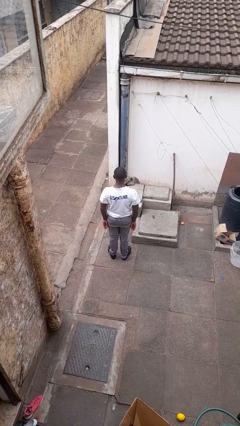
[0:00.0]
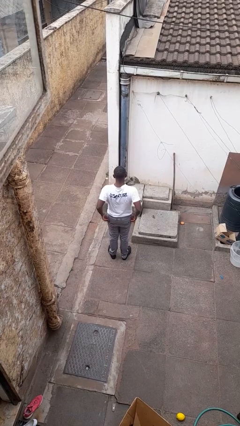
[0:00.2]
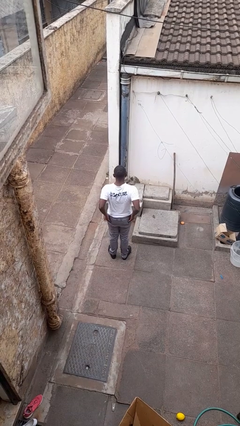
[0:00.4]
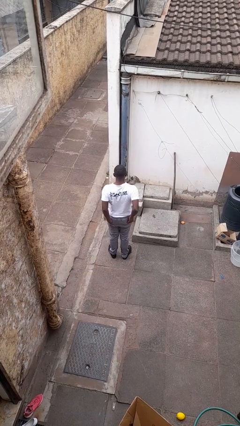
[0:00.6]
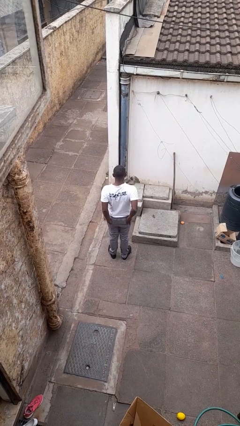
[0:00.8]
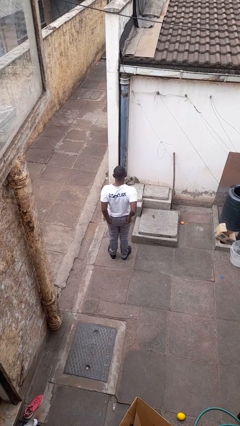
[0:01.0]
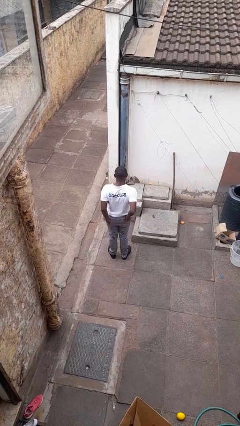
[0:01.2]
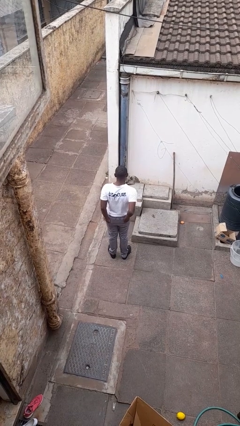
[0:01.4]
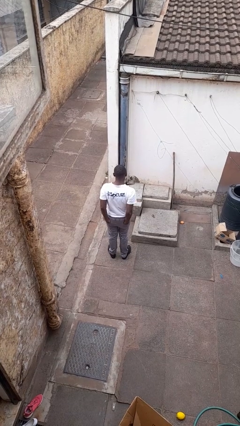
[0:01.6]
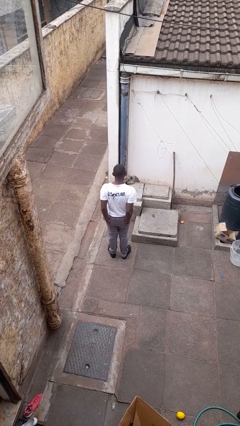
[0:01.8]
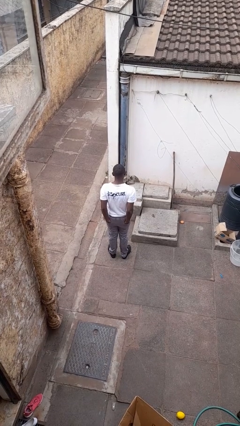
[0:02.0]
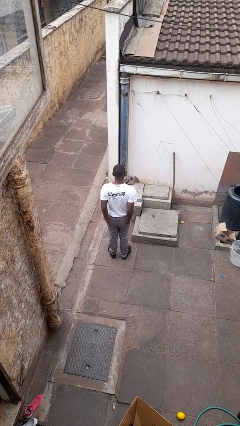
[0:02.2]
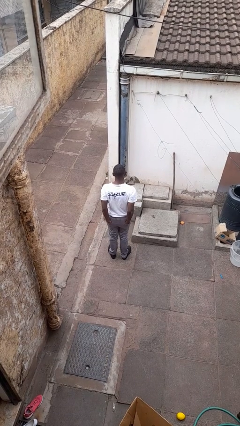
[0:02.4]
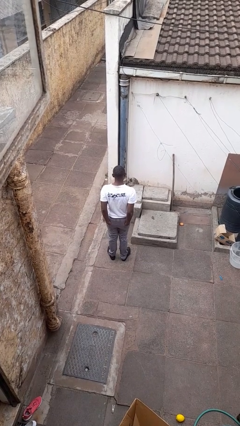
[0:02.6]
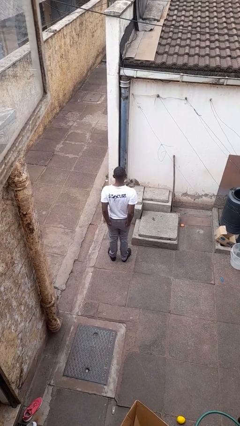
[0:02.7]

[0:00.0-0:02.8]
person puts hands in back pockets

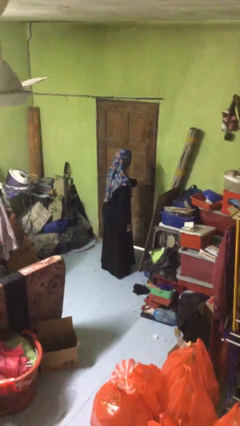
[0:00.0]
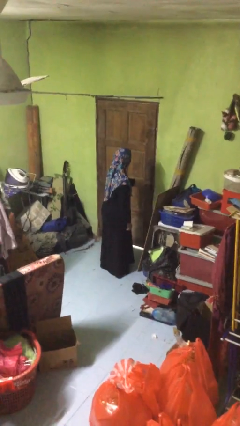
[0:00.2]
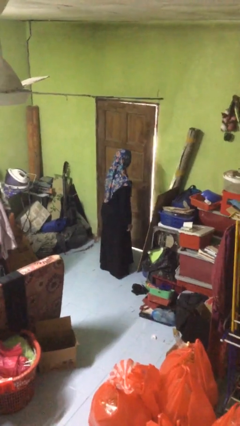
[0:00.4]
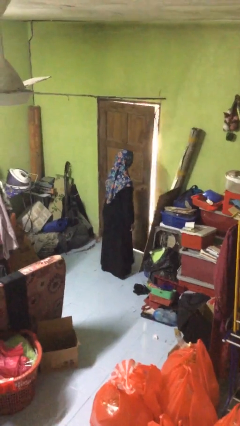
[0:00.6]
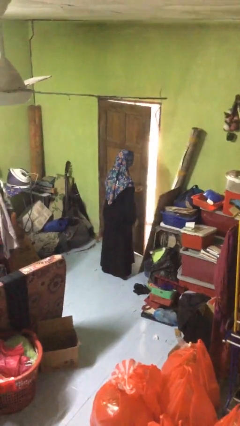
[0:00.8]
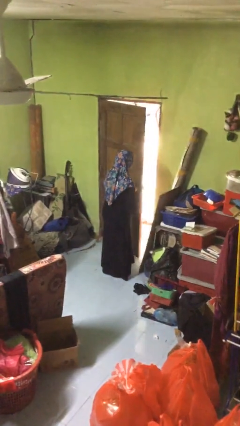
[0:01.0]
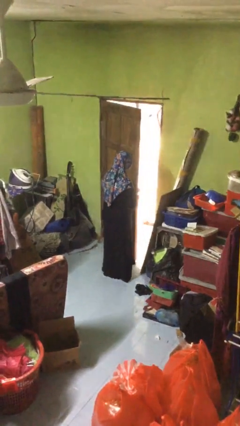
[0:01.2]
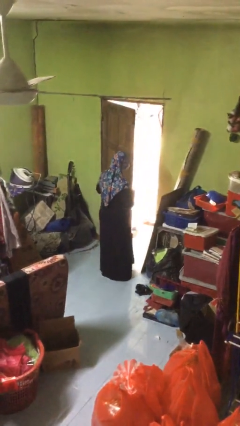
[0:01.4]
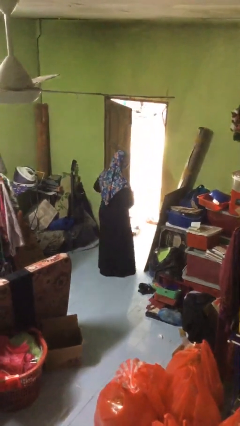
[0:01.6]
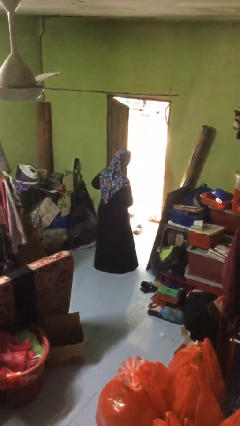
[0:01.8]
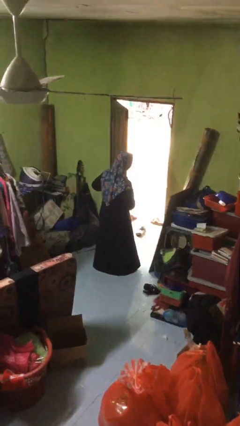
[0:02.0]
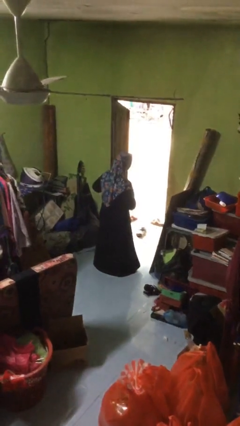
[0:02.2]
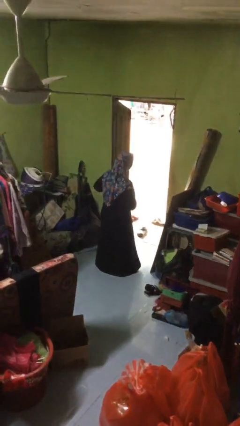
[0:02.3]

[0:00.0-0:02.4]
person opens facility door

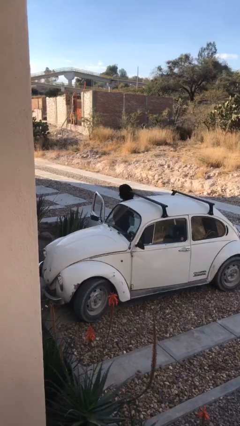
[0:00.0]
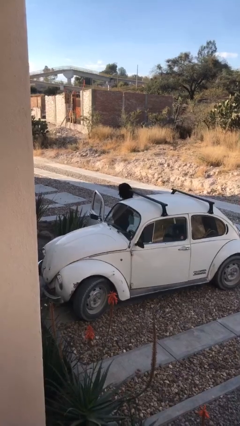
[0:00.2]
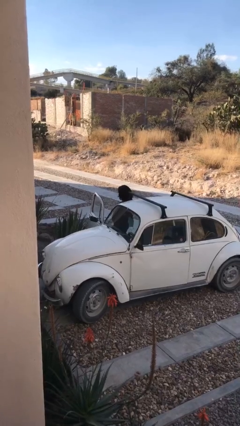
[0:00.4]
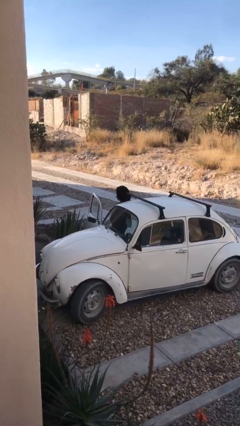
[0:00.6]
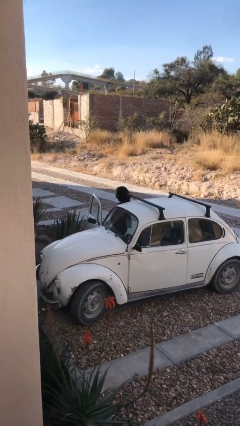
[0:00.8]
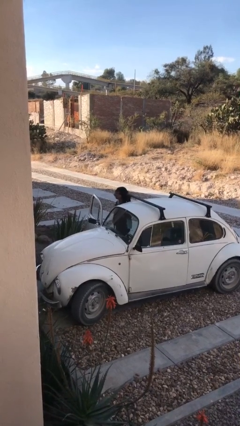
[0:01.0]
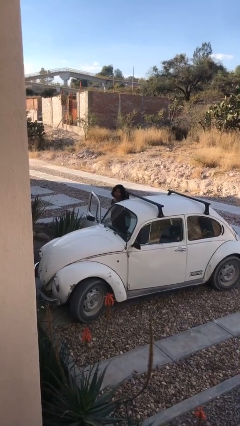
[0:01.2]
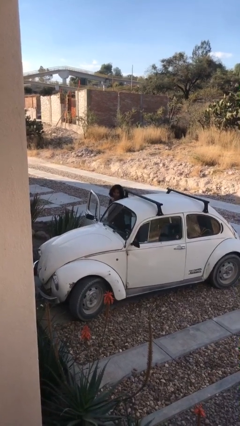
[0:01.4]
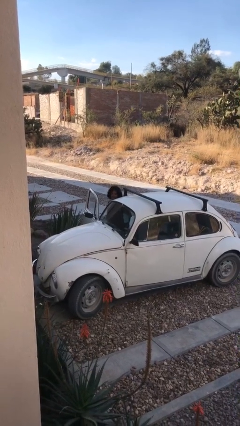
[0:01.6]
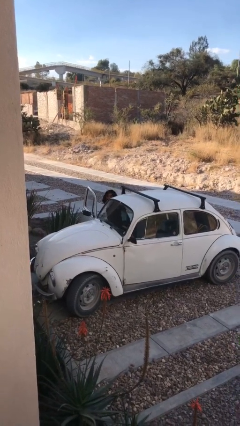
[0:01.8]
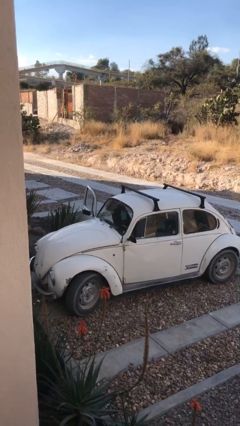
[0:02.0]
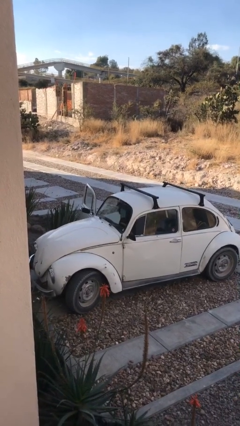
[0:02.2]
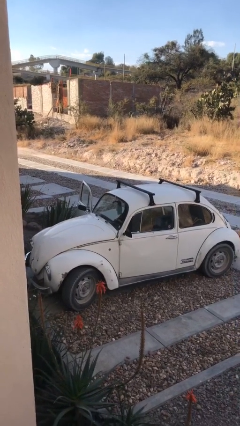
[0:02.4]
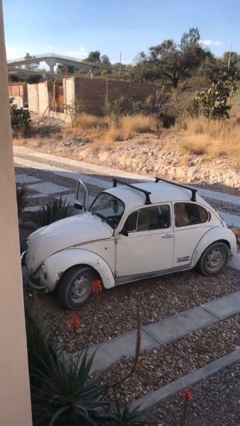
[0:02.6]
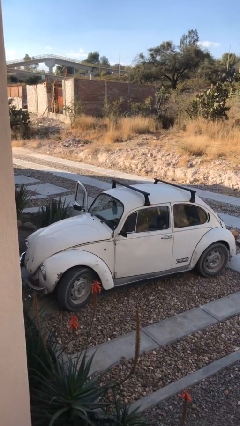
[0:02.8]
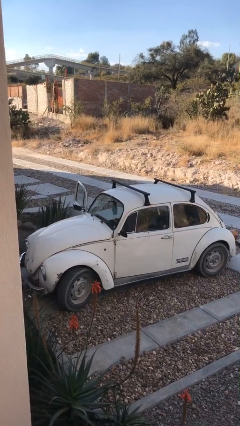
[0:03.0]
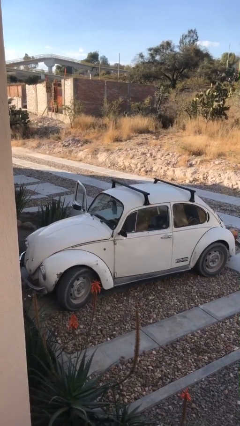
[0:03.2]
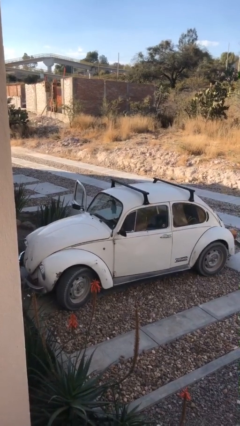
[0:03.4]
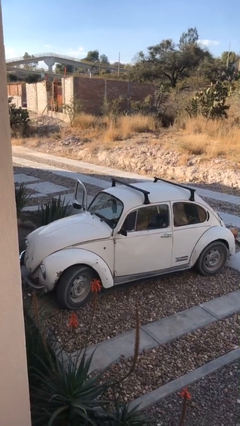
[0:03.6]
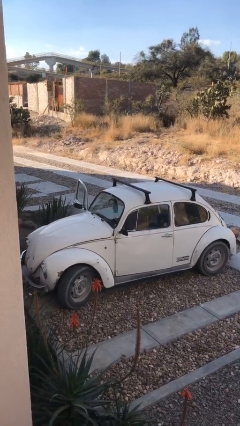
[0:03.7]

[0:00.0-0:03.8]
person enters car

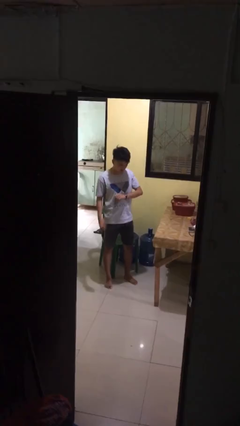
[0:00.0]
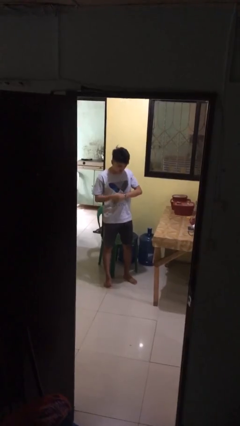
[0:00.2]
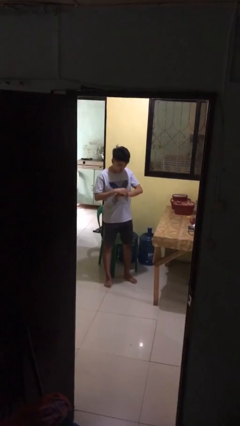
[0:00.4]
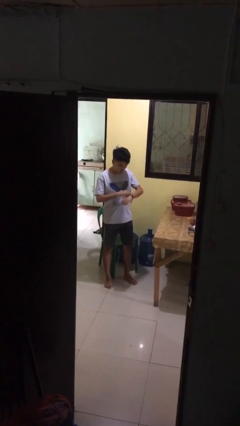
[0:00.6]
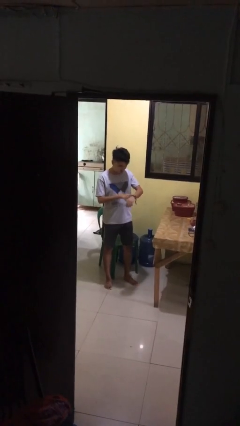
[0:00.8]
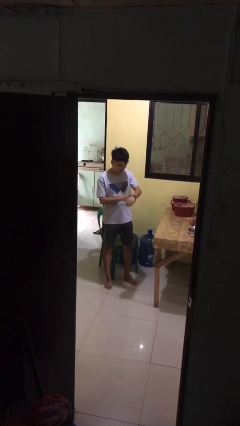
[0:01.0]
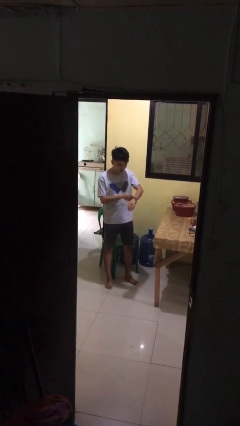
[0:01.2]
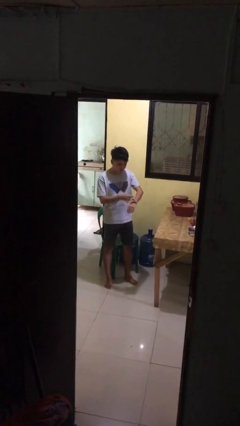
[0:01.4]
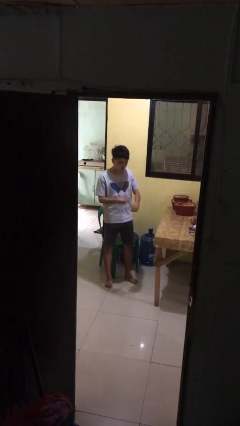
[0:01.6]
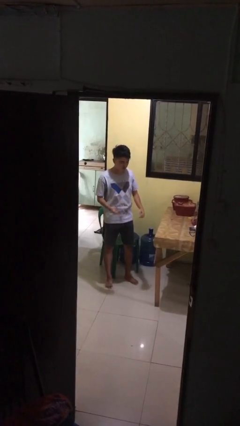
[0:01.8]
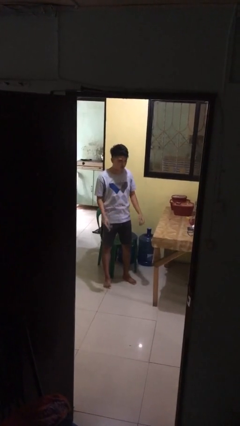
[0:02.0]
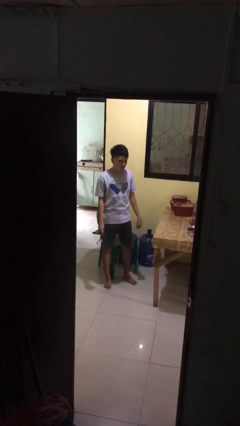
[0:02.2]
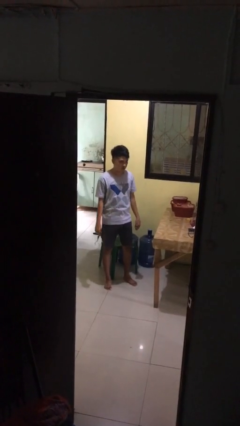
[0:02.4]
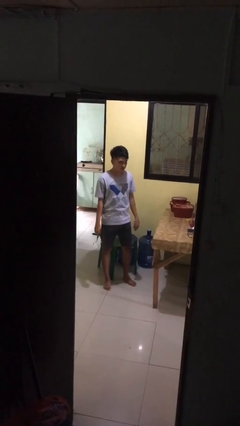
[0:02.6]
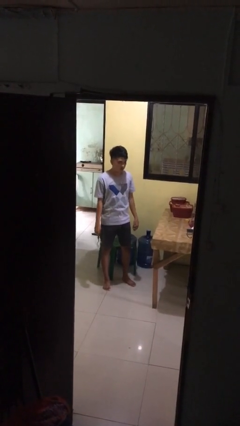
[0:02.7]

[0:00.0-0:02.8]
person takes off wristwatch

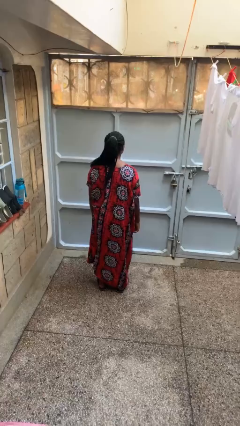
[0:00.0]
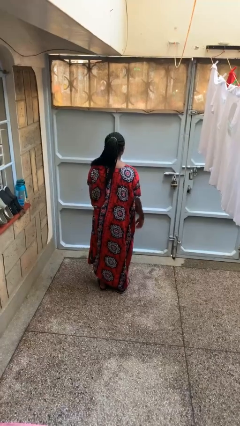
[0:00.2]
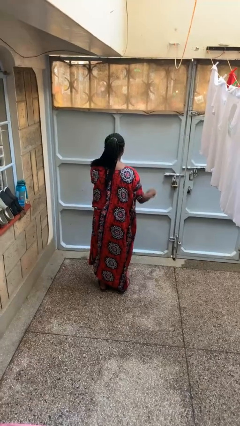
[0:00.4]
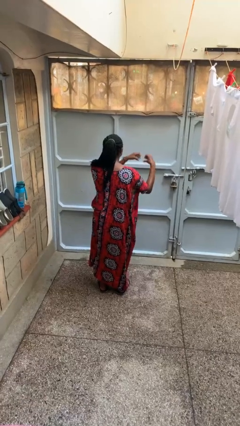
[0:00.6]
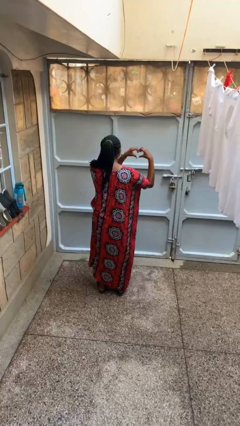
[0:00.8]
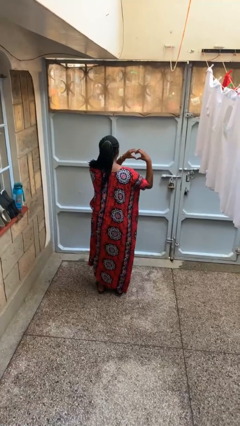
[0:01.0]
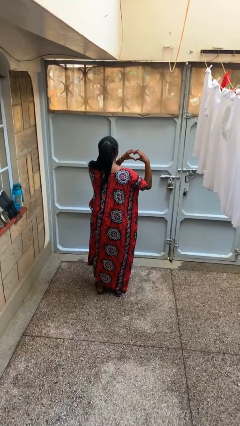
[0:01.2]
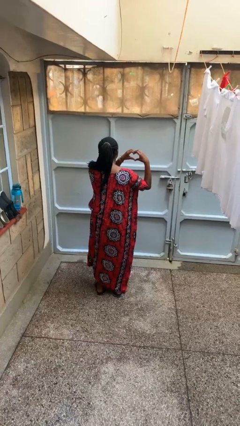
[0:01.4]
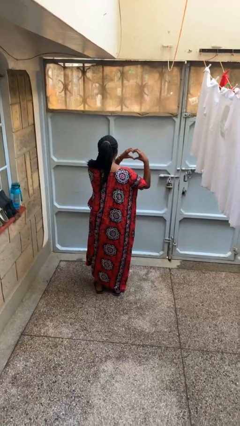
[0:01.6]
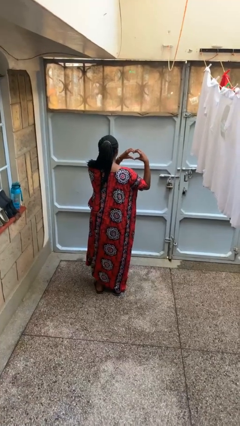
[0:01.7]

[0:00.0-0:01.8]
person gestures heart

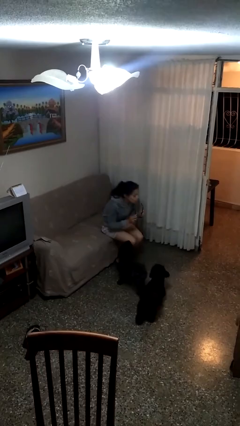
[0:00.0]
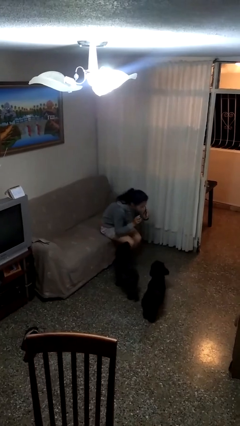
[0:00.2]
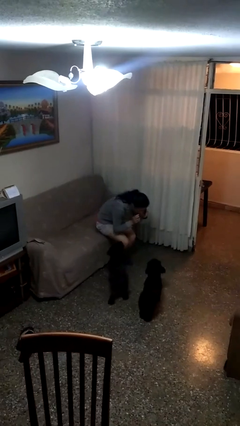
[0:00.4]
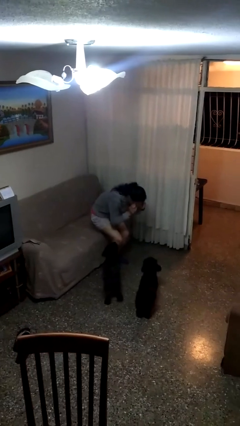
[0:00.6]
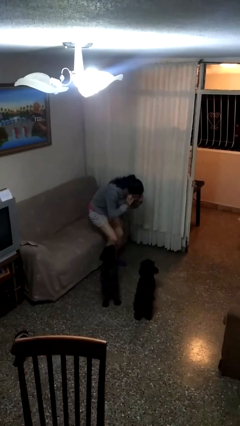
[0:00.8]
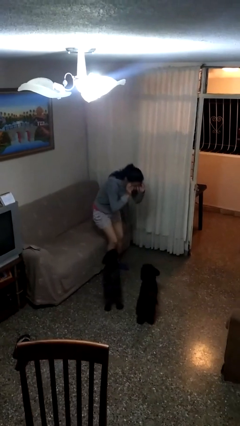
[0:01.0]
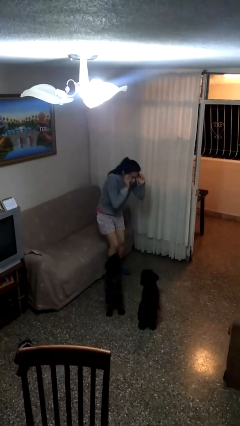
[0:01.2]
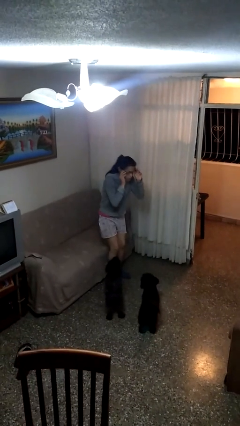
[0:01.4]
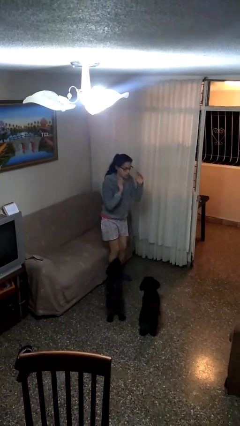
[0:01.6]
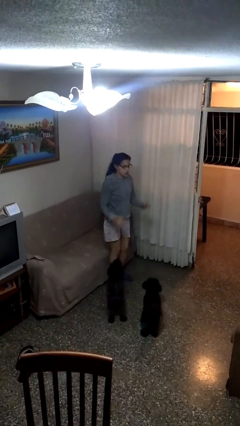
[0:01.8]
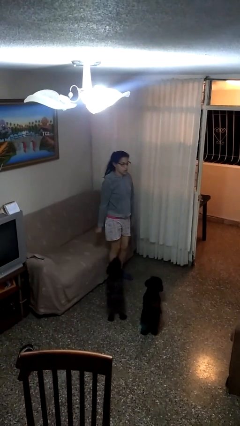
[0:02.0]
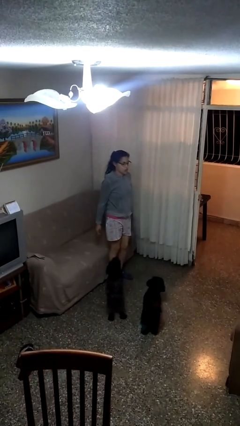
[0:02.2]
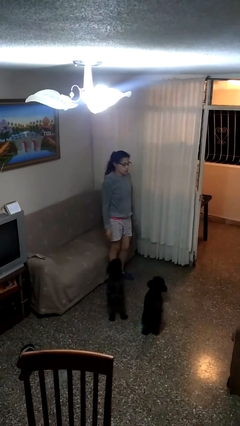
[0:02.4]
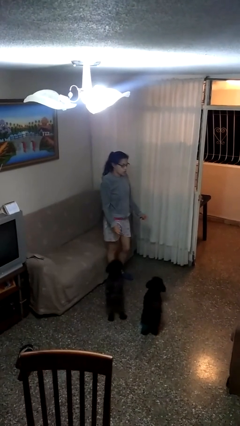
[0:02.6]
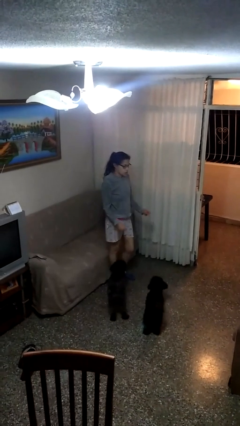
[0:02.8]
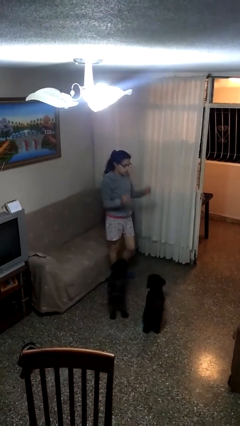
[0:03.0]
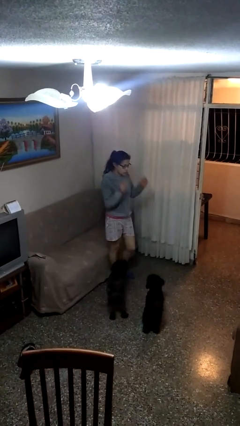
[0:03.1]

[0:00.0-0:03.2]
person puts on glasses

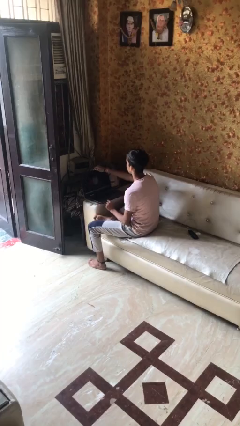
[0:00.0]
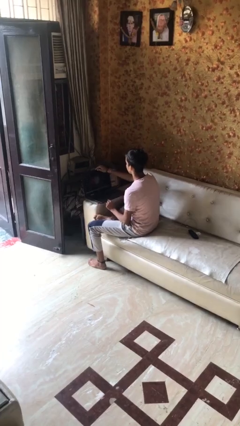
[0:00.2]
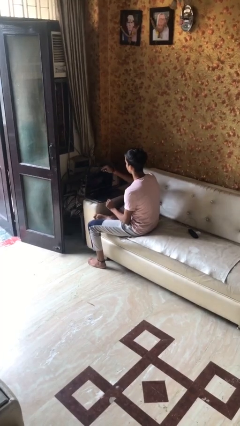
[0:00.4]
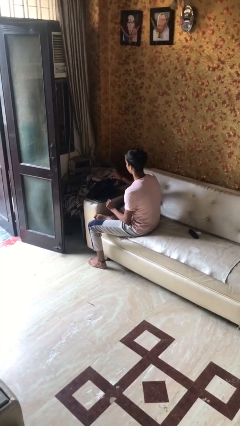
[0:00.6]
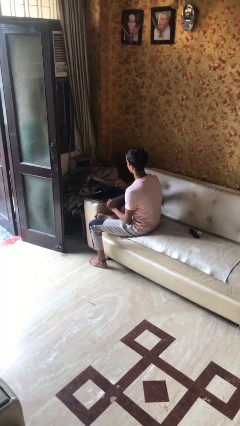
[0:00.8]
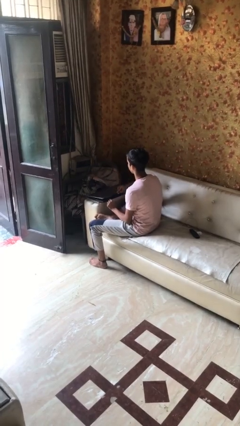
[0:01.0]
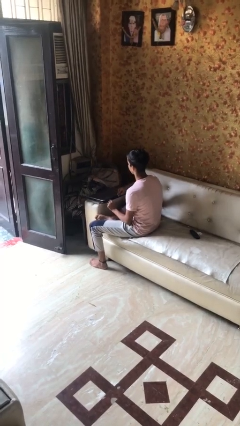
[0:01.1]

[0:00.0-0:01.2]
person closes laptop
